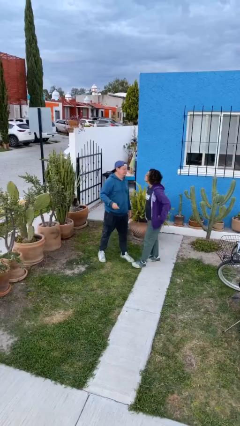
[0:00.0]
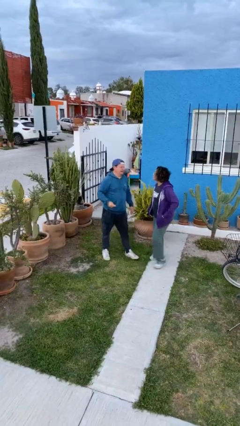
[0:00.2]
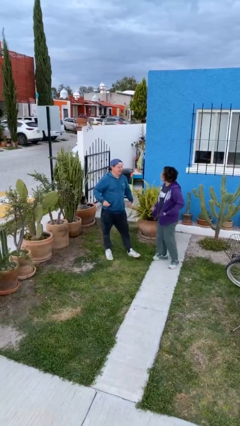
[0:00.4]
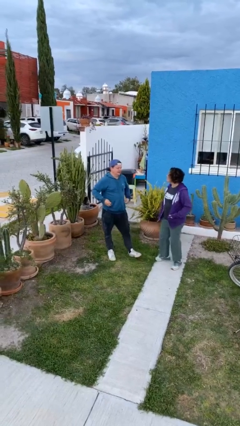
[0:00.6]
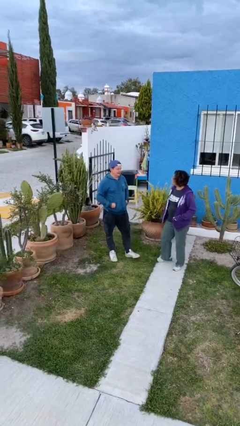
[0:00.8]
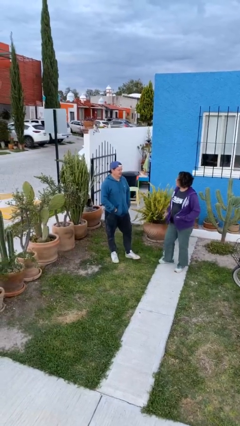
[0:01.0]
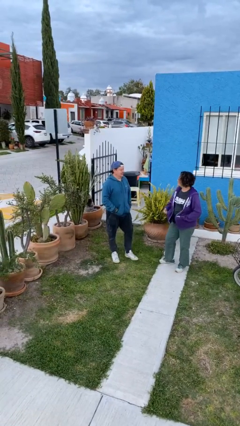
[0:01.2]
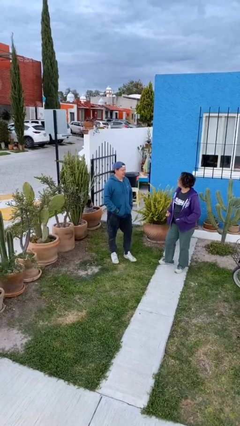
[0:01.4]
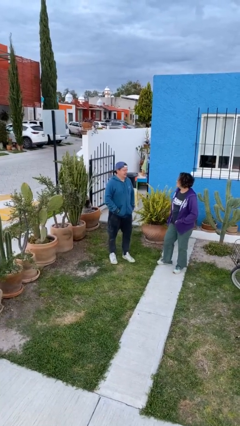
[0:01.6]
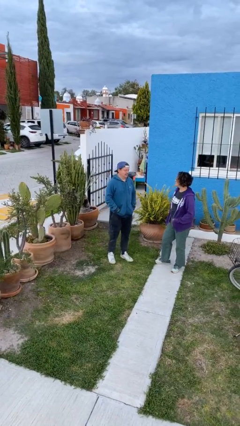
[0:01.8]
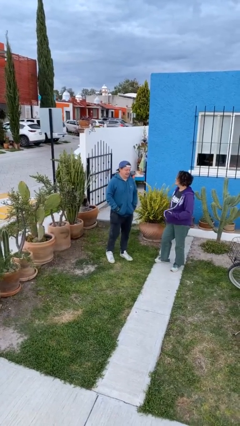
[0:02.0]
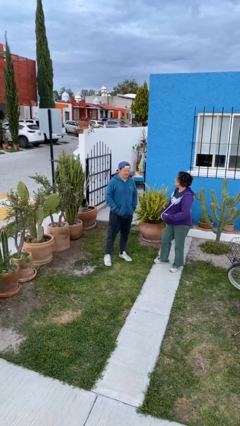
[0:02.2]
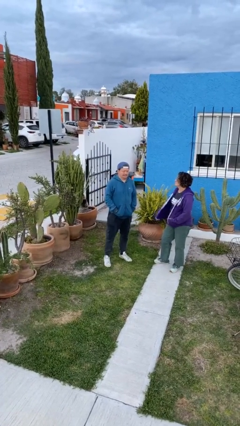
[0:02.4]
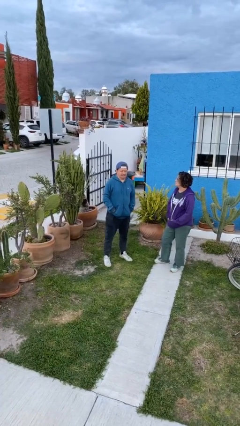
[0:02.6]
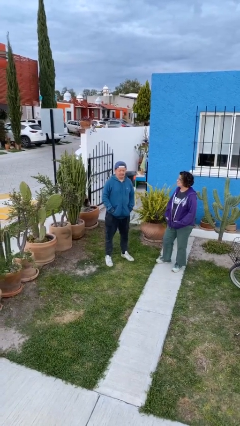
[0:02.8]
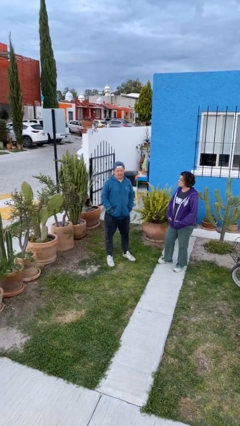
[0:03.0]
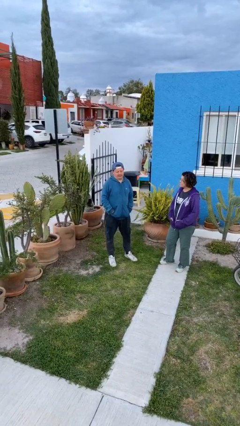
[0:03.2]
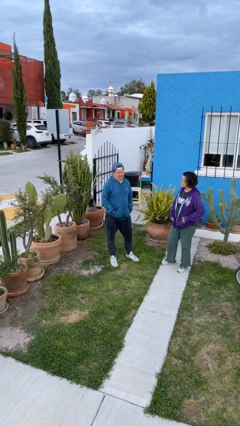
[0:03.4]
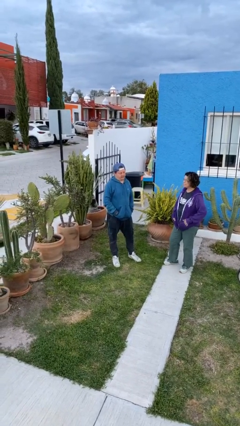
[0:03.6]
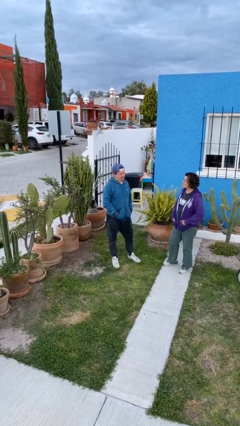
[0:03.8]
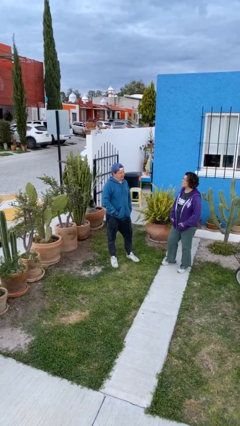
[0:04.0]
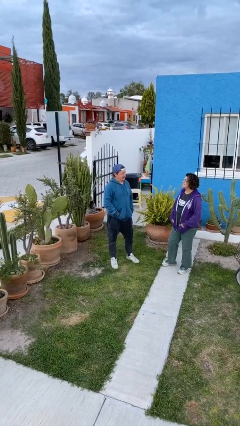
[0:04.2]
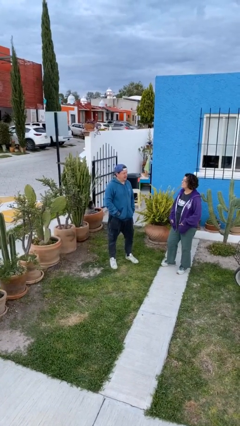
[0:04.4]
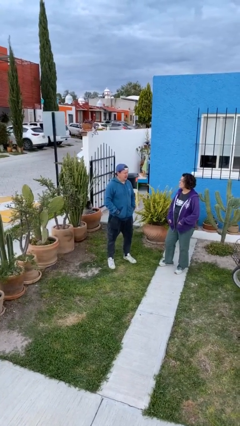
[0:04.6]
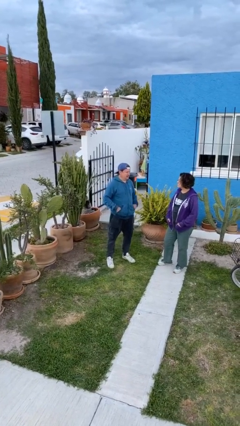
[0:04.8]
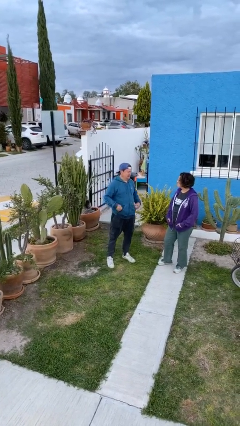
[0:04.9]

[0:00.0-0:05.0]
person talks to person

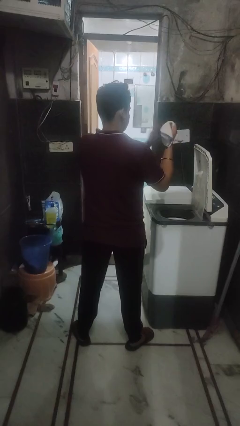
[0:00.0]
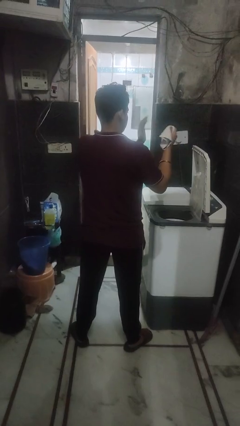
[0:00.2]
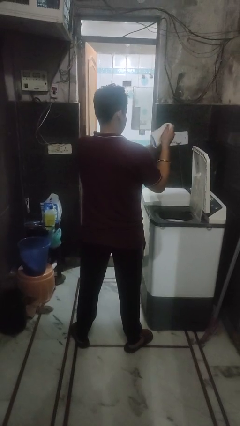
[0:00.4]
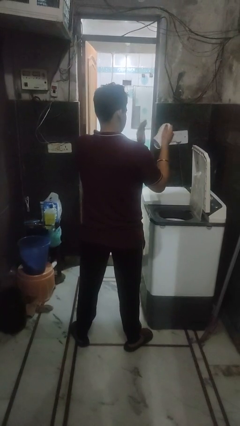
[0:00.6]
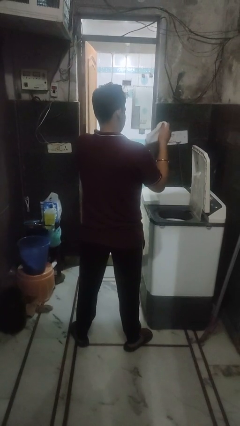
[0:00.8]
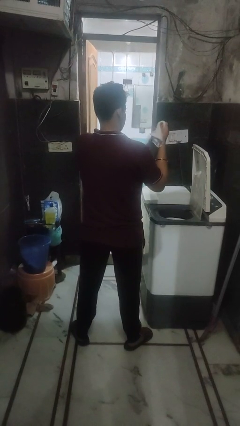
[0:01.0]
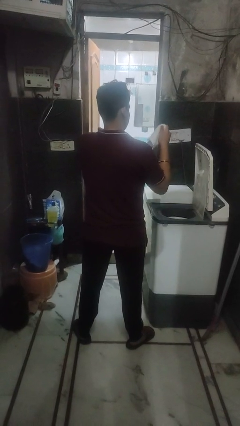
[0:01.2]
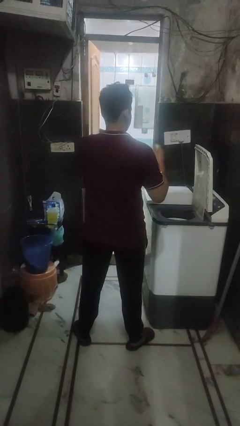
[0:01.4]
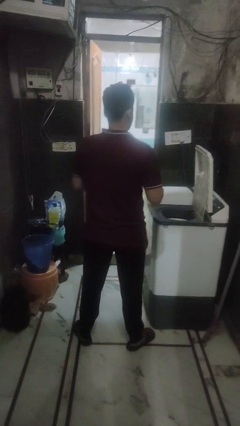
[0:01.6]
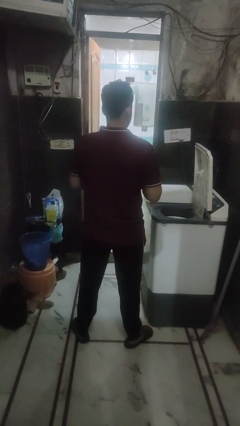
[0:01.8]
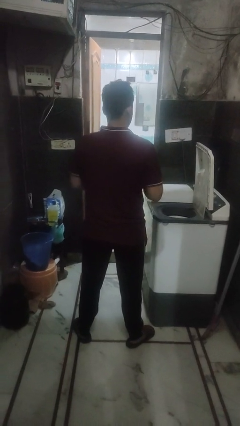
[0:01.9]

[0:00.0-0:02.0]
person cleans dryer lint trap

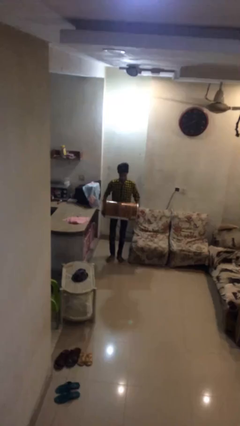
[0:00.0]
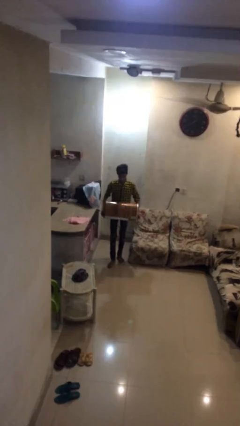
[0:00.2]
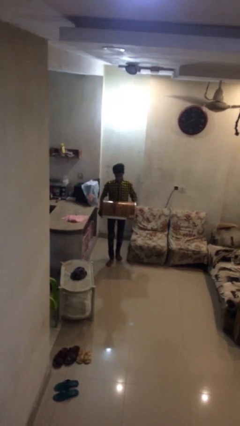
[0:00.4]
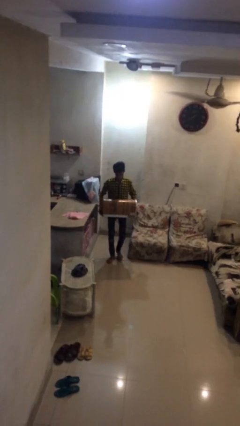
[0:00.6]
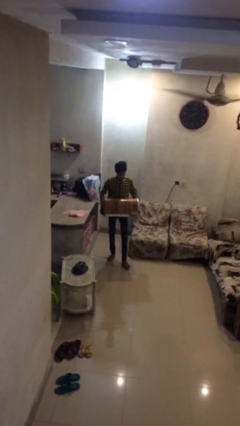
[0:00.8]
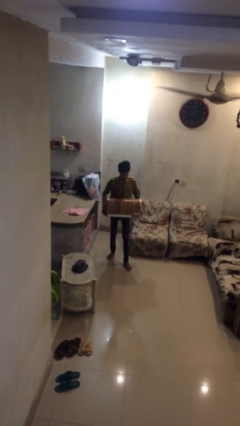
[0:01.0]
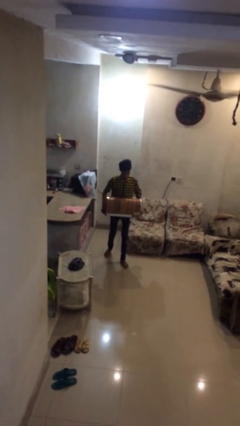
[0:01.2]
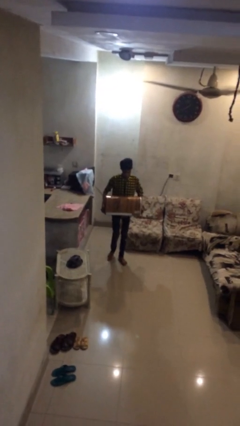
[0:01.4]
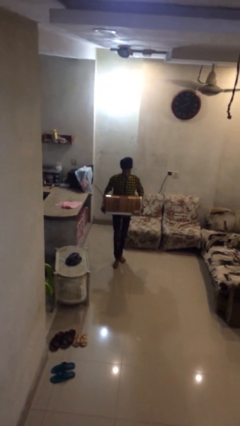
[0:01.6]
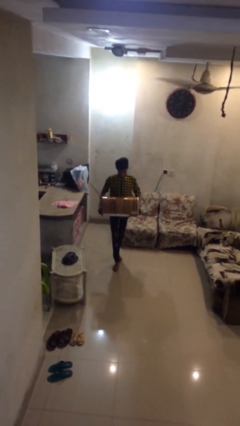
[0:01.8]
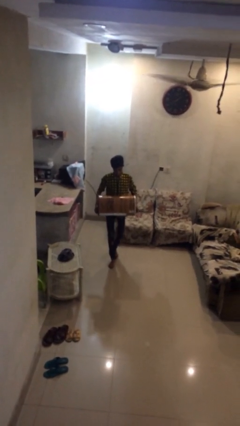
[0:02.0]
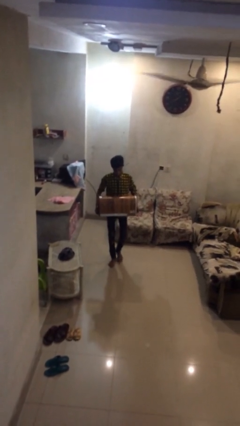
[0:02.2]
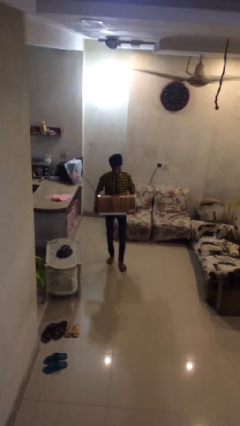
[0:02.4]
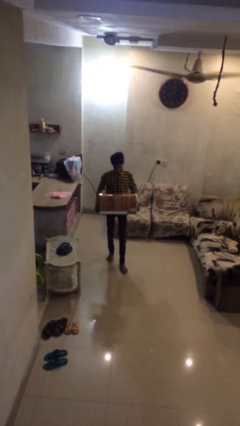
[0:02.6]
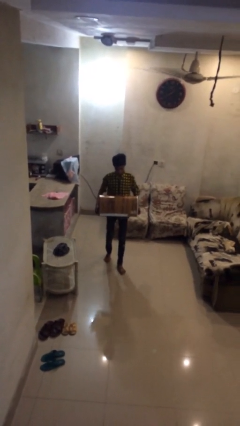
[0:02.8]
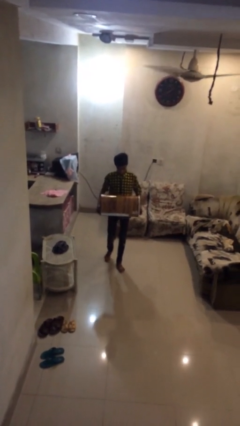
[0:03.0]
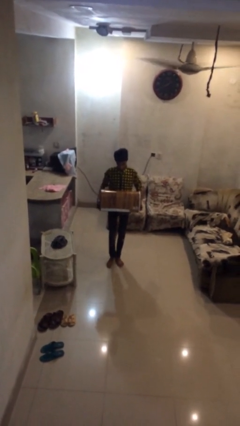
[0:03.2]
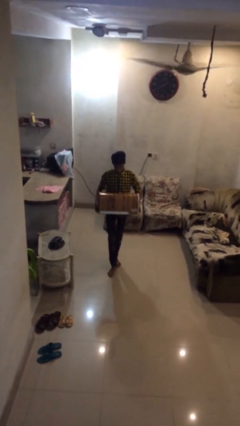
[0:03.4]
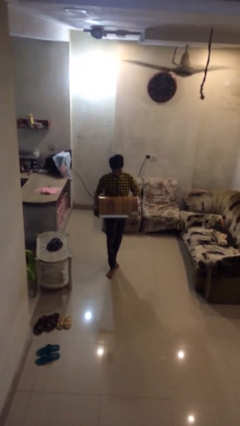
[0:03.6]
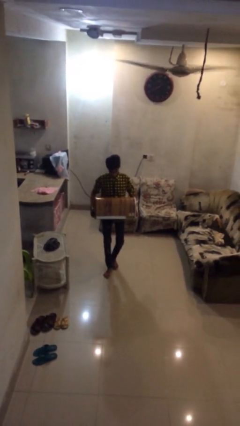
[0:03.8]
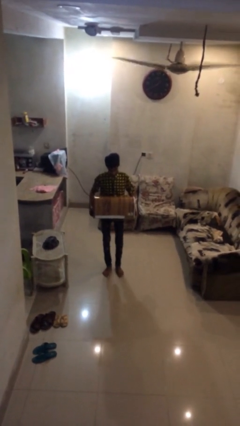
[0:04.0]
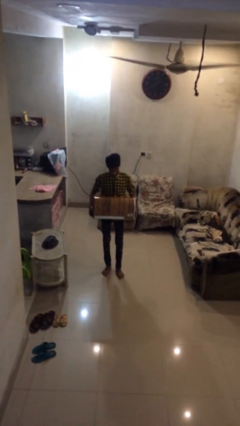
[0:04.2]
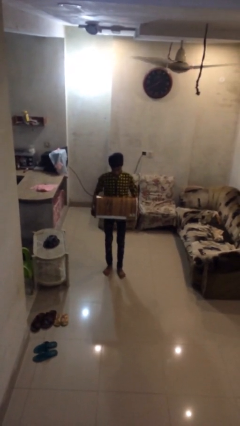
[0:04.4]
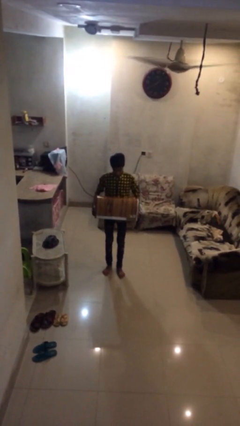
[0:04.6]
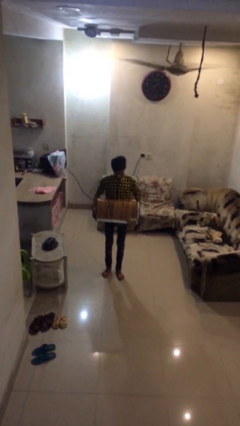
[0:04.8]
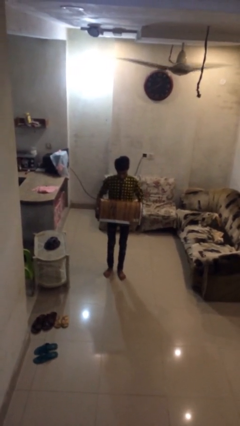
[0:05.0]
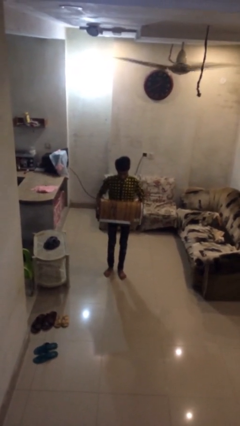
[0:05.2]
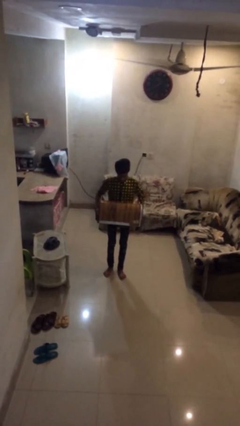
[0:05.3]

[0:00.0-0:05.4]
person carries heavy object

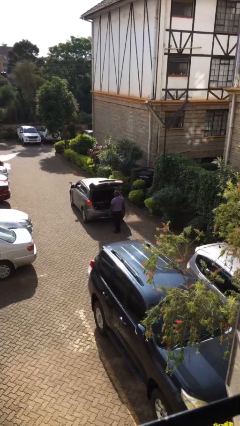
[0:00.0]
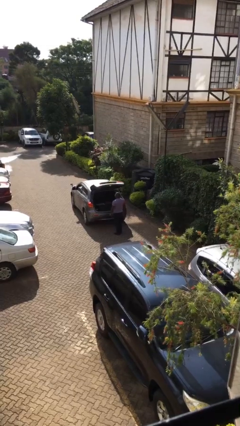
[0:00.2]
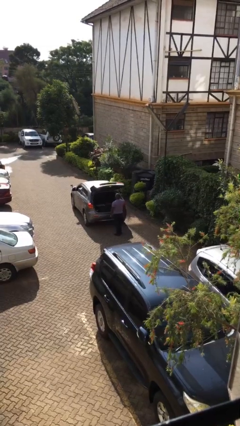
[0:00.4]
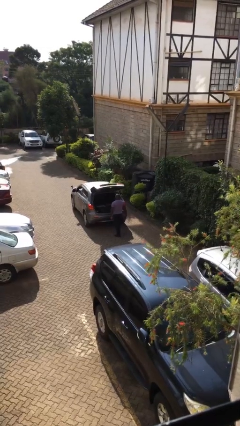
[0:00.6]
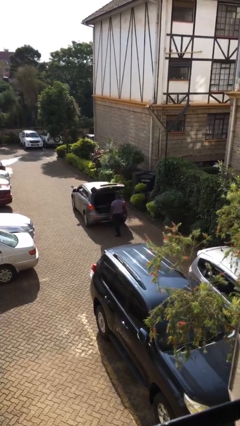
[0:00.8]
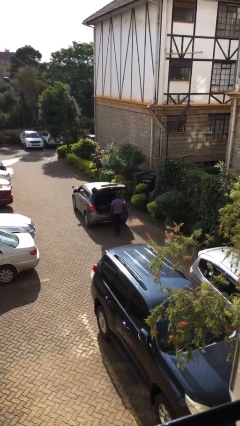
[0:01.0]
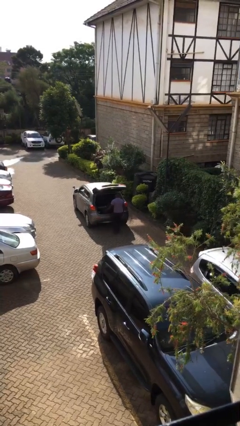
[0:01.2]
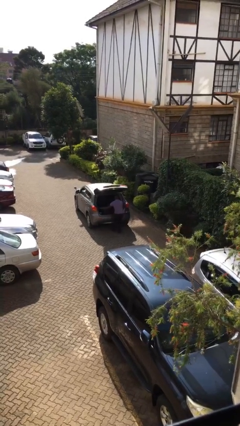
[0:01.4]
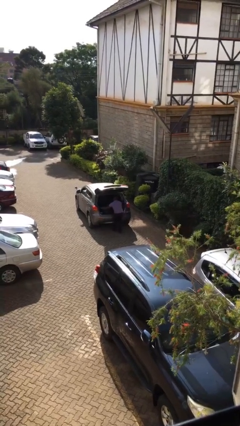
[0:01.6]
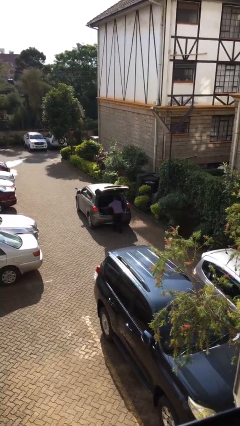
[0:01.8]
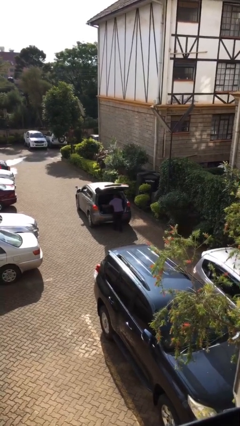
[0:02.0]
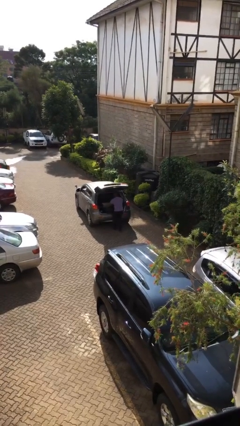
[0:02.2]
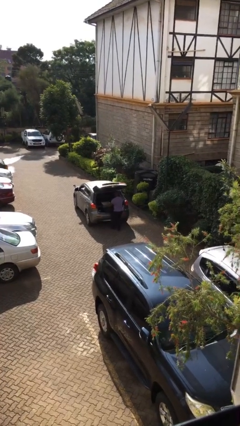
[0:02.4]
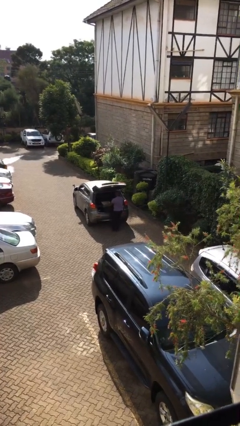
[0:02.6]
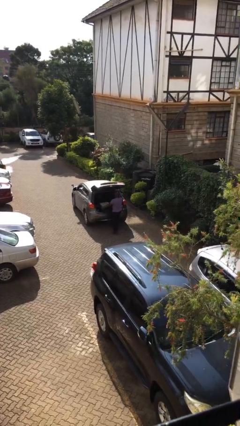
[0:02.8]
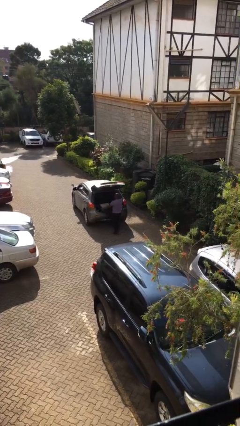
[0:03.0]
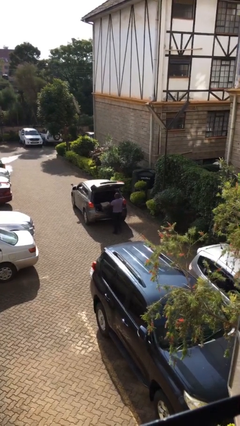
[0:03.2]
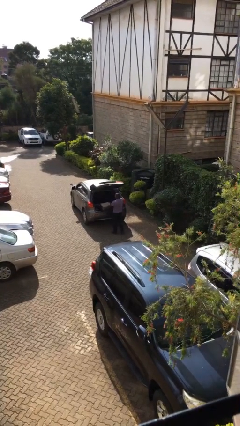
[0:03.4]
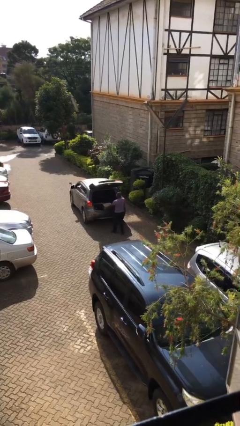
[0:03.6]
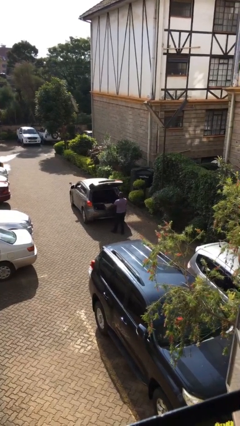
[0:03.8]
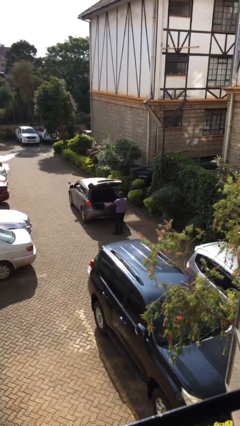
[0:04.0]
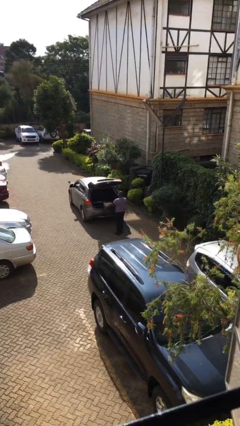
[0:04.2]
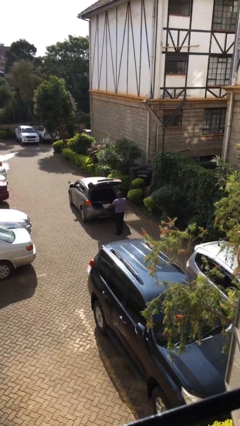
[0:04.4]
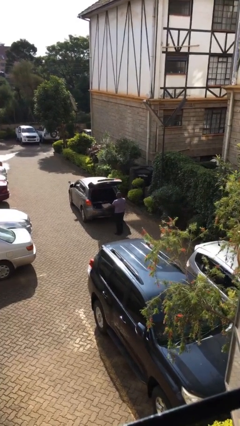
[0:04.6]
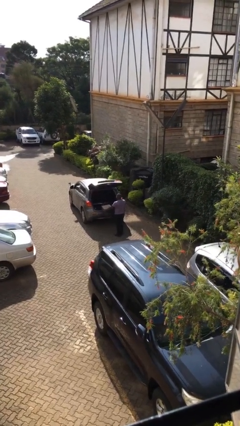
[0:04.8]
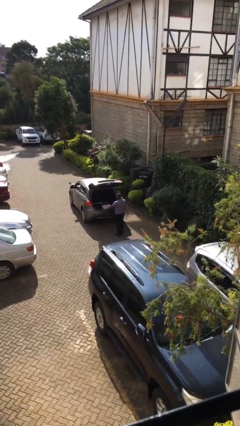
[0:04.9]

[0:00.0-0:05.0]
person unloads car

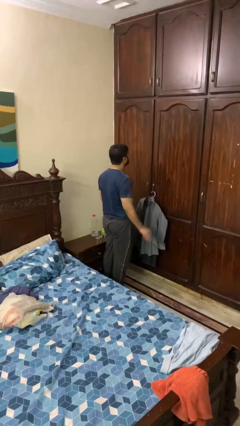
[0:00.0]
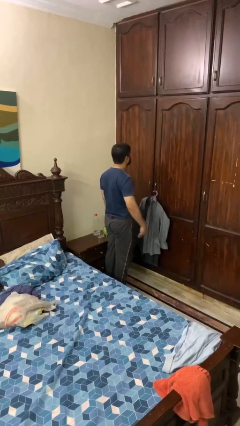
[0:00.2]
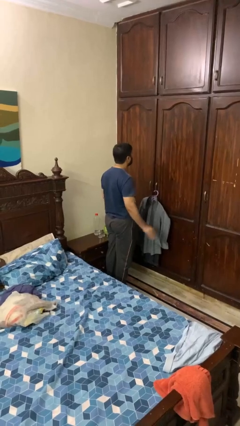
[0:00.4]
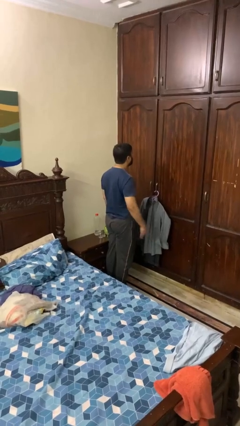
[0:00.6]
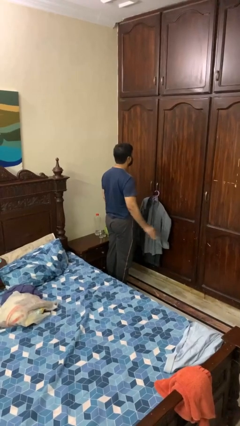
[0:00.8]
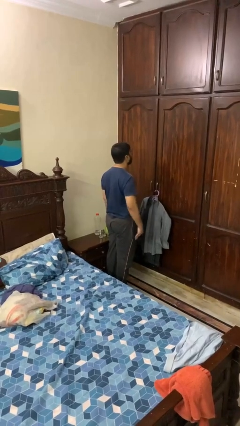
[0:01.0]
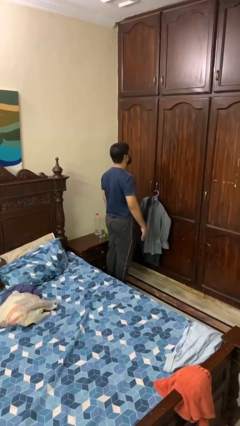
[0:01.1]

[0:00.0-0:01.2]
person slaps hands on thighs
